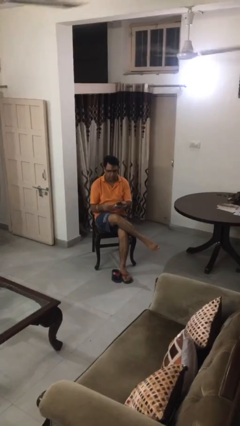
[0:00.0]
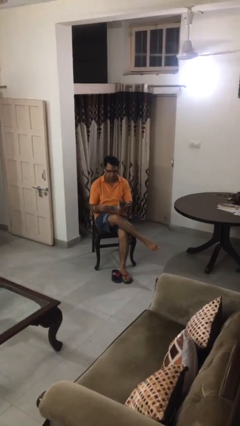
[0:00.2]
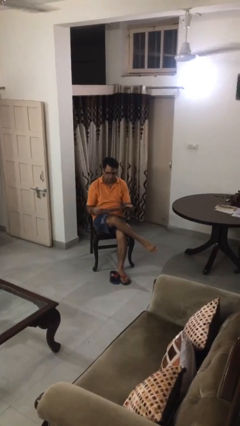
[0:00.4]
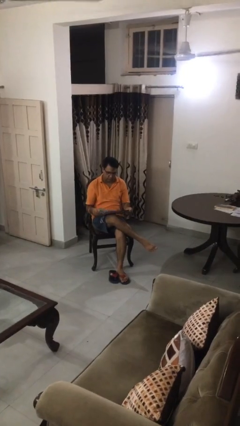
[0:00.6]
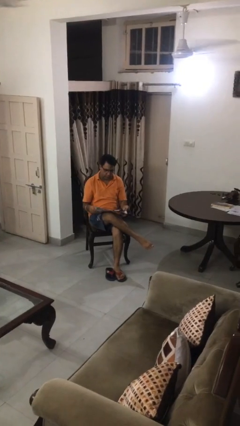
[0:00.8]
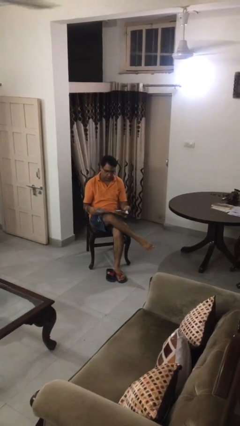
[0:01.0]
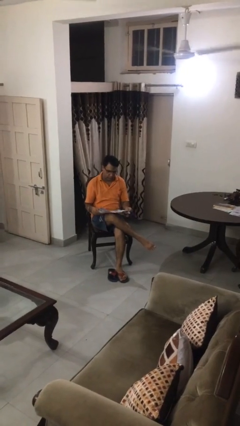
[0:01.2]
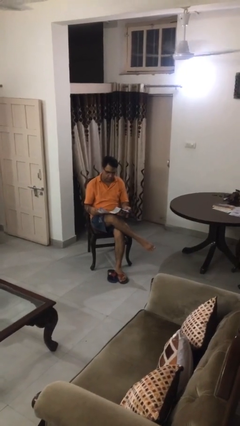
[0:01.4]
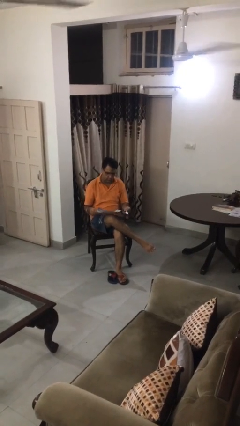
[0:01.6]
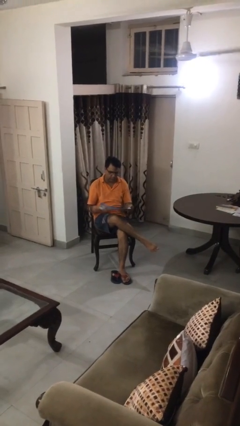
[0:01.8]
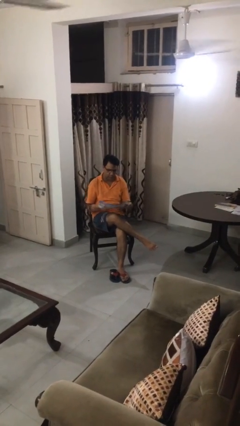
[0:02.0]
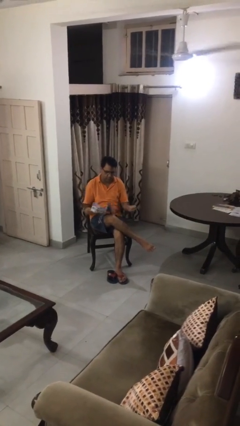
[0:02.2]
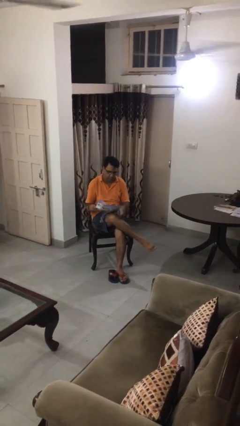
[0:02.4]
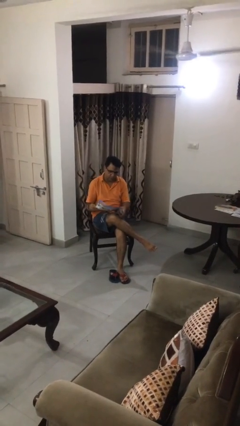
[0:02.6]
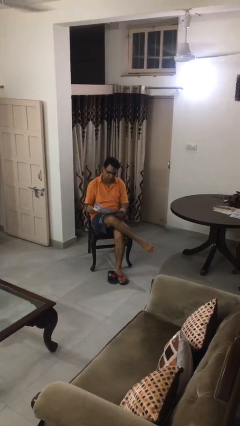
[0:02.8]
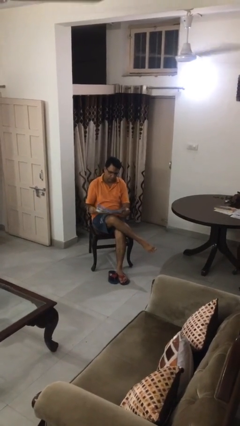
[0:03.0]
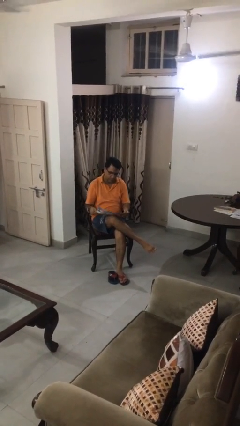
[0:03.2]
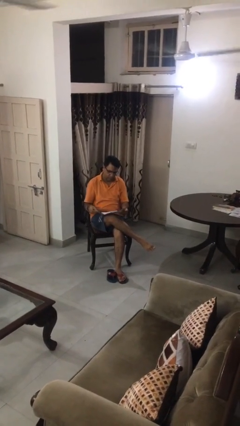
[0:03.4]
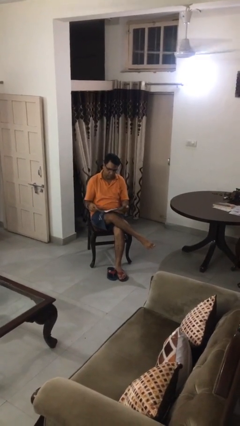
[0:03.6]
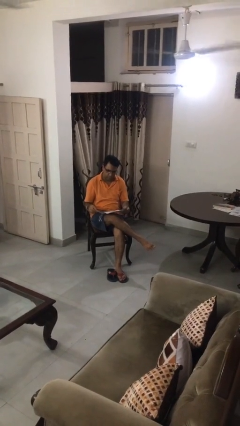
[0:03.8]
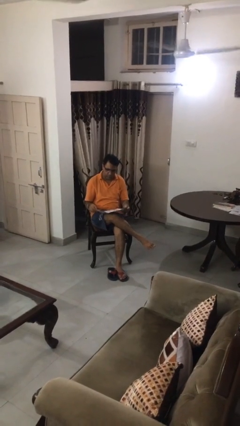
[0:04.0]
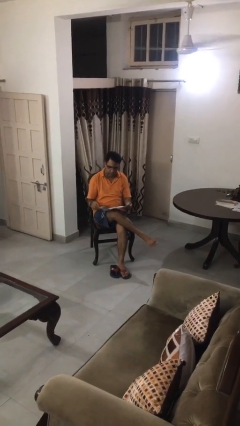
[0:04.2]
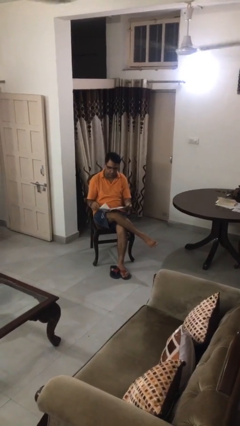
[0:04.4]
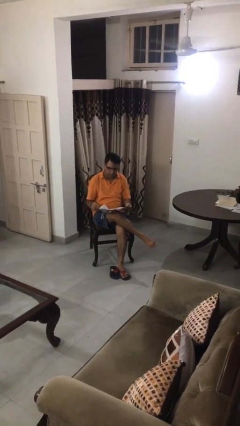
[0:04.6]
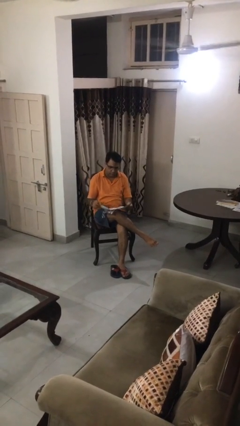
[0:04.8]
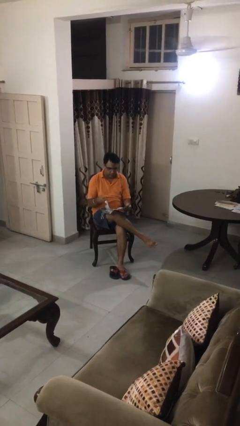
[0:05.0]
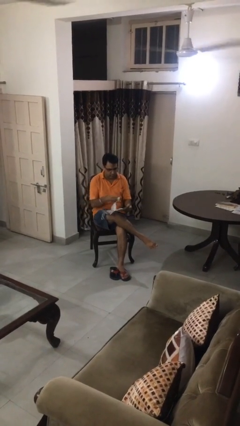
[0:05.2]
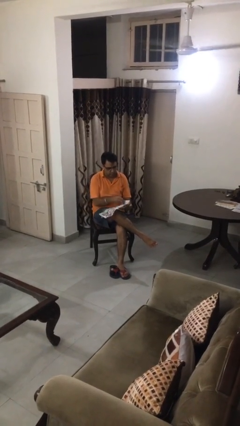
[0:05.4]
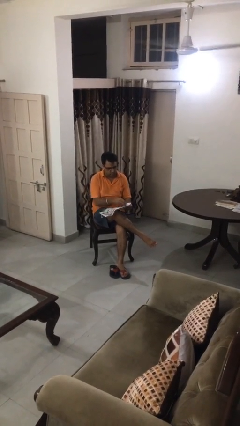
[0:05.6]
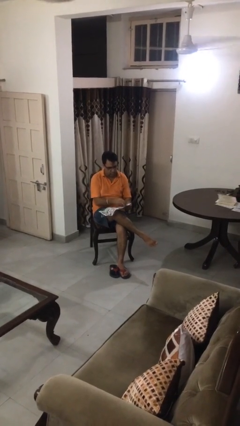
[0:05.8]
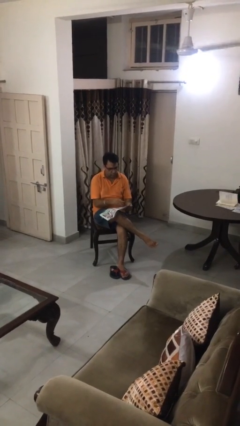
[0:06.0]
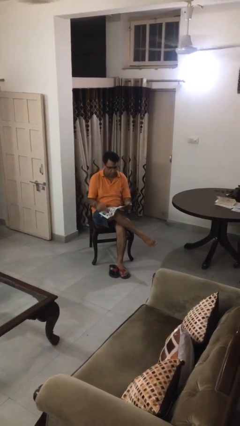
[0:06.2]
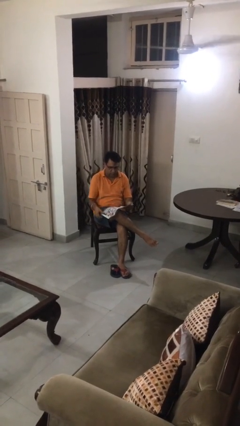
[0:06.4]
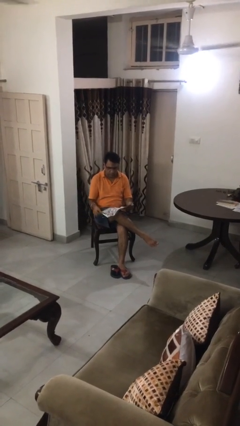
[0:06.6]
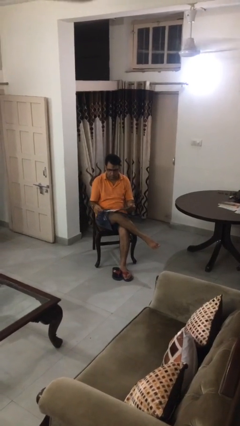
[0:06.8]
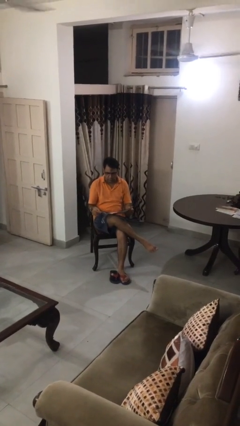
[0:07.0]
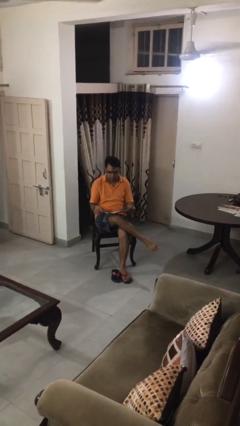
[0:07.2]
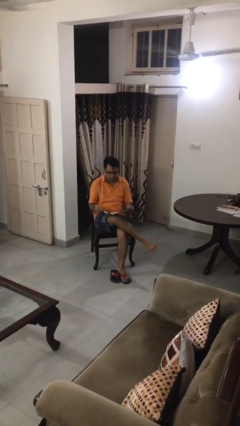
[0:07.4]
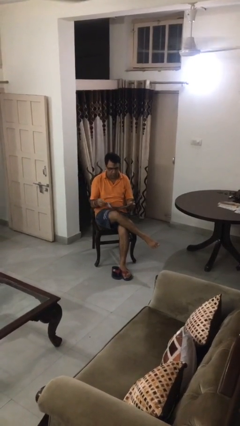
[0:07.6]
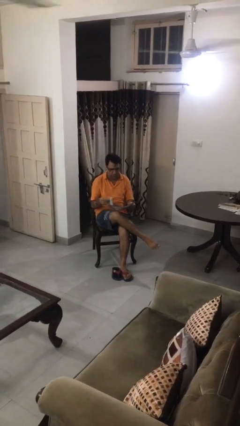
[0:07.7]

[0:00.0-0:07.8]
person reads magazine

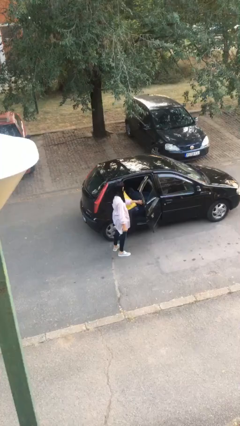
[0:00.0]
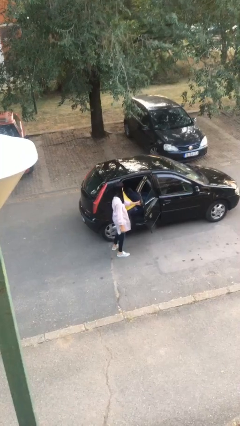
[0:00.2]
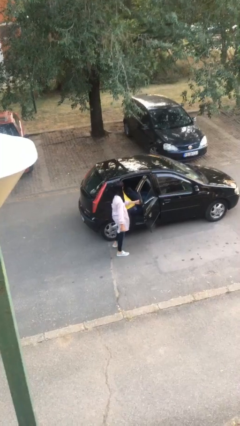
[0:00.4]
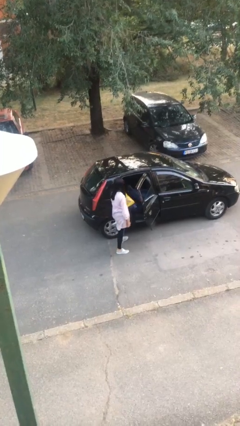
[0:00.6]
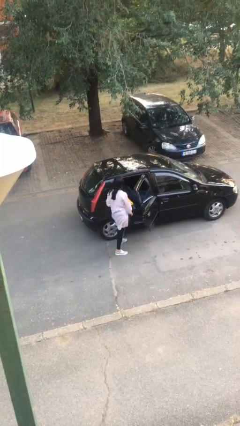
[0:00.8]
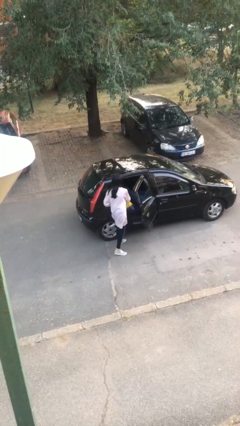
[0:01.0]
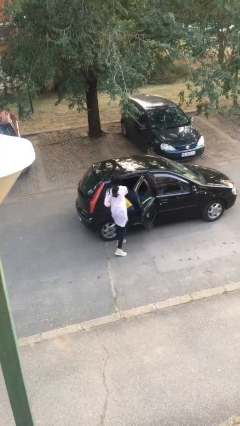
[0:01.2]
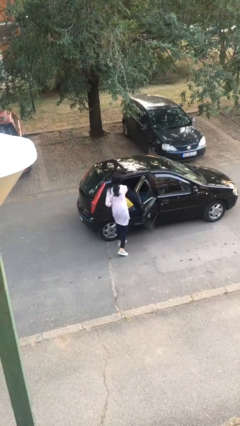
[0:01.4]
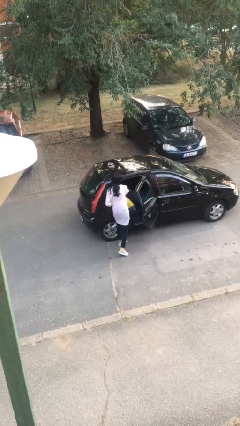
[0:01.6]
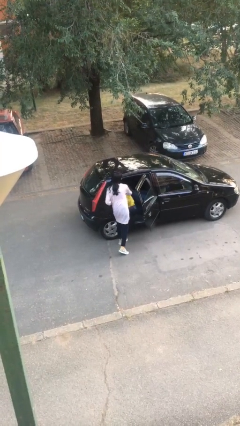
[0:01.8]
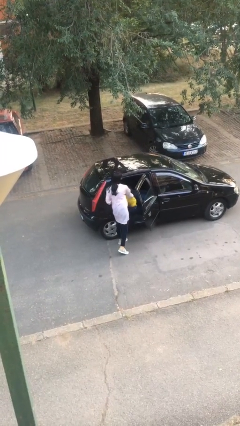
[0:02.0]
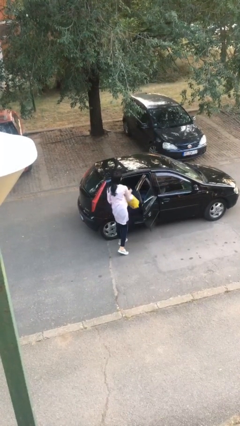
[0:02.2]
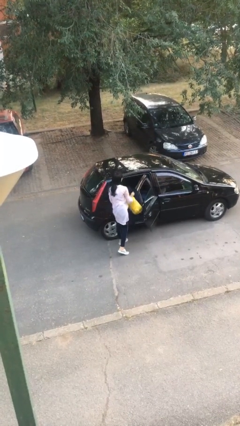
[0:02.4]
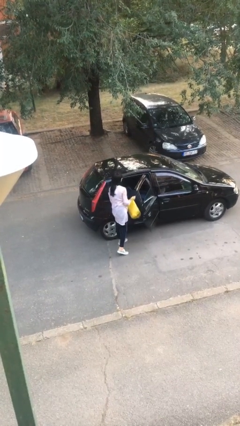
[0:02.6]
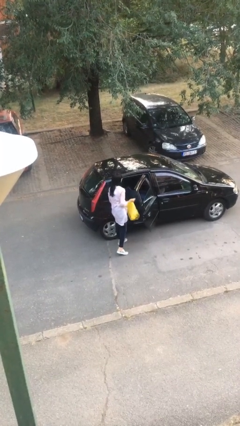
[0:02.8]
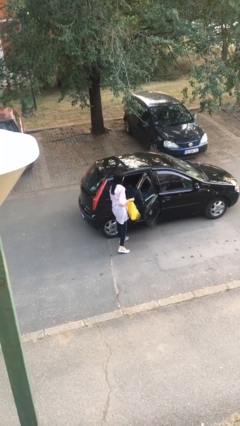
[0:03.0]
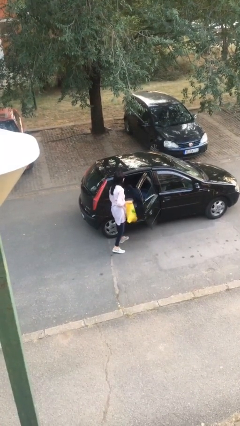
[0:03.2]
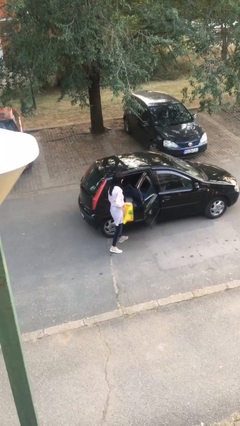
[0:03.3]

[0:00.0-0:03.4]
person unloads car

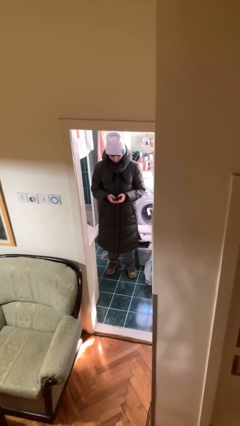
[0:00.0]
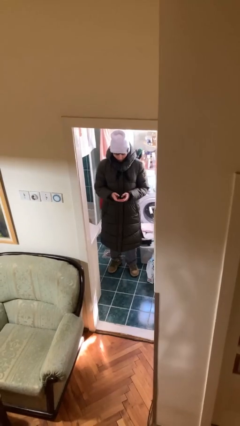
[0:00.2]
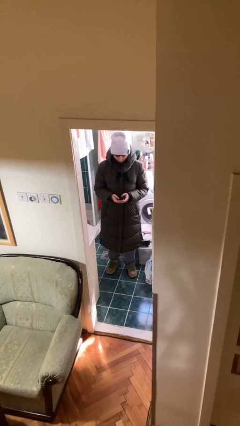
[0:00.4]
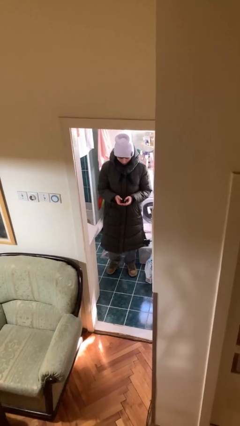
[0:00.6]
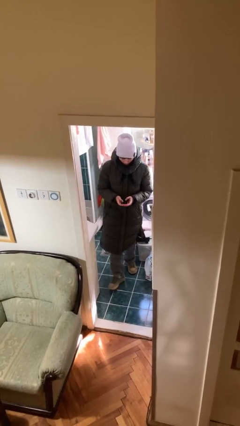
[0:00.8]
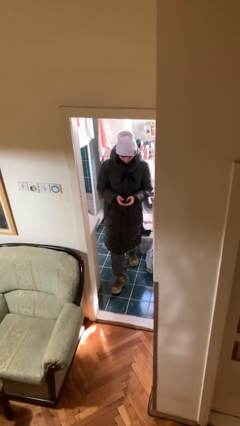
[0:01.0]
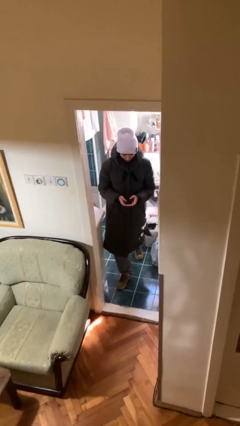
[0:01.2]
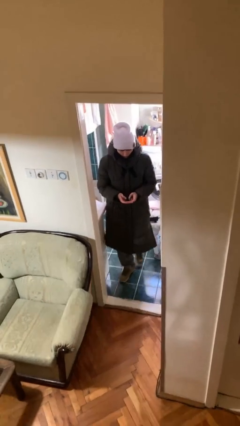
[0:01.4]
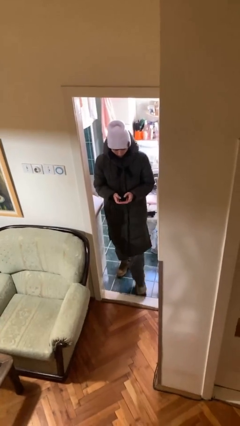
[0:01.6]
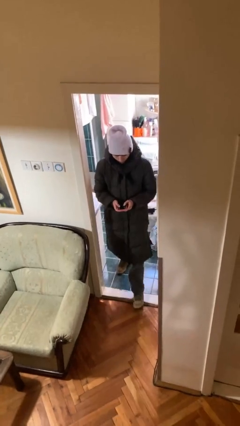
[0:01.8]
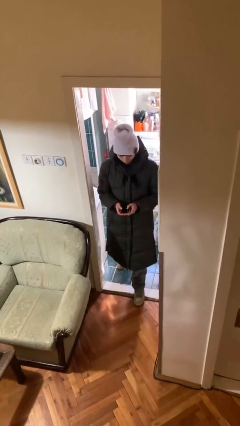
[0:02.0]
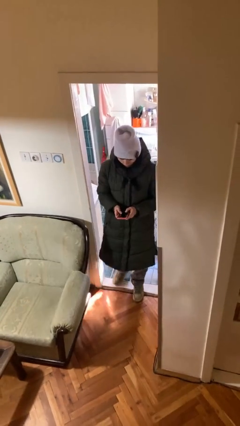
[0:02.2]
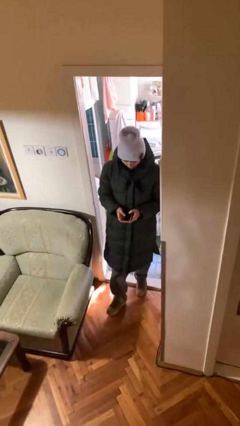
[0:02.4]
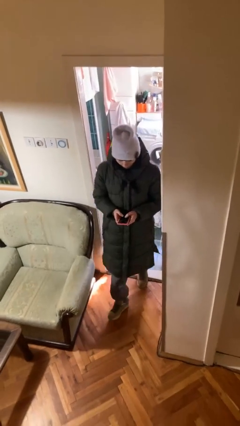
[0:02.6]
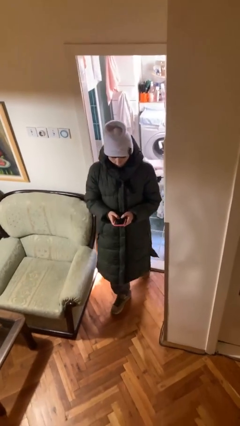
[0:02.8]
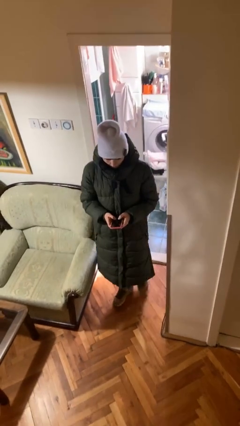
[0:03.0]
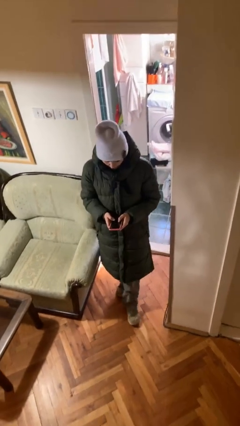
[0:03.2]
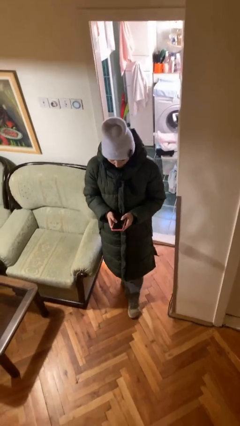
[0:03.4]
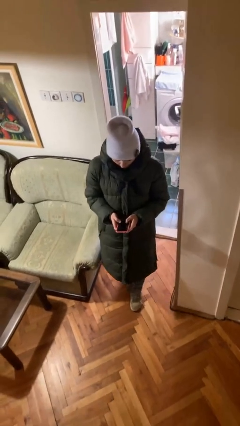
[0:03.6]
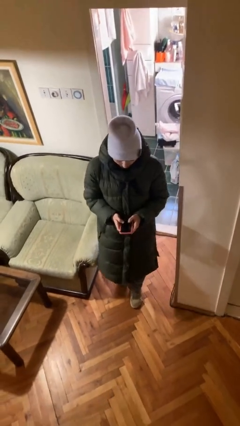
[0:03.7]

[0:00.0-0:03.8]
person enters scene through structure

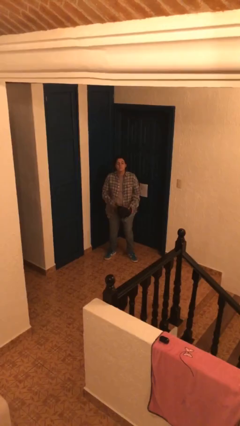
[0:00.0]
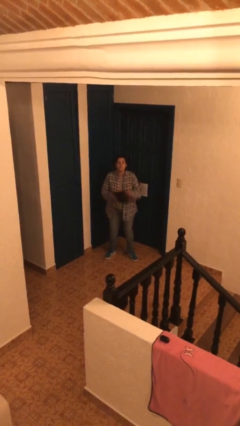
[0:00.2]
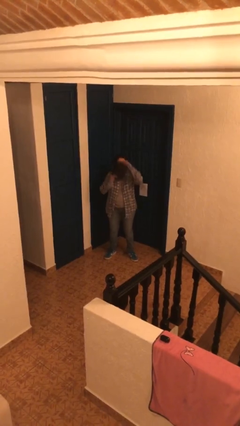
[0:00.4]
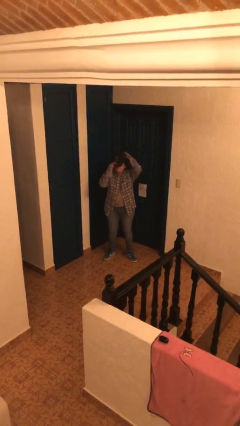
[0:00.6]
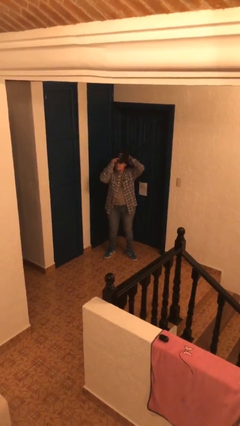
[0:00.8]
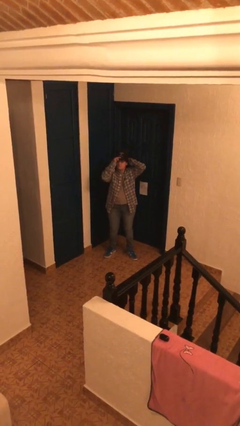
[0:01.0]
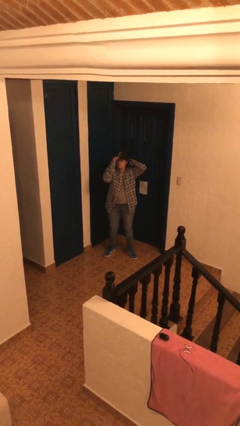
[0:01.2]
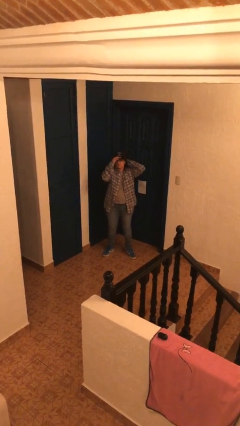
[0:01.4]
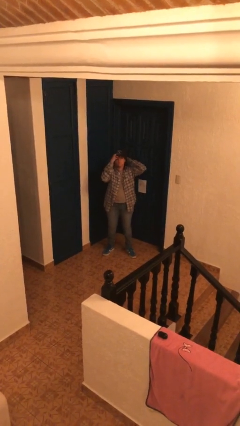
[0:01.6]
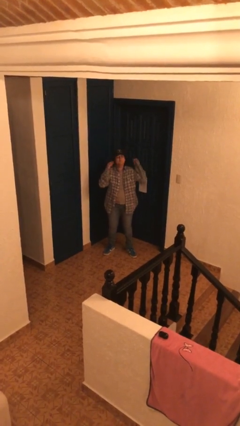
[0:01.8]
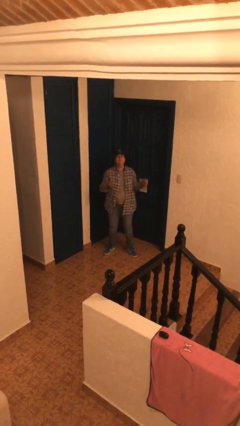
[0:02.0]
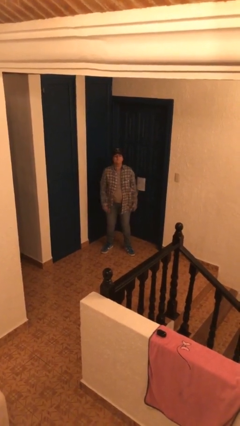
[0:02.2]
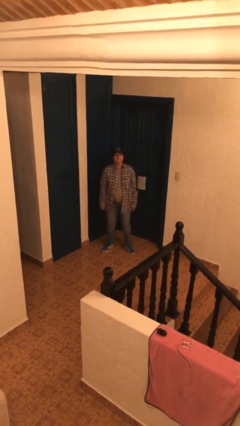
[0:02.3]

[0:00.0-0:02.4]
person puts on hat

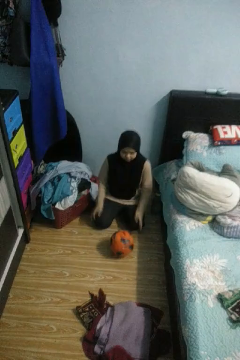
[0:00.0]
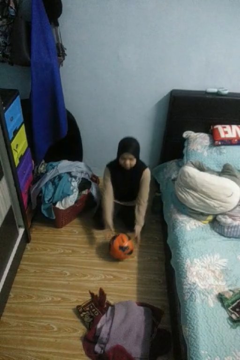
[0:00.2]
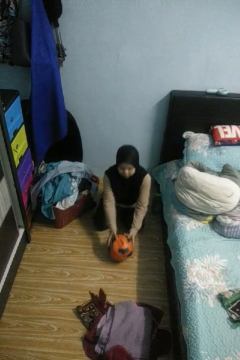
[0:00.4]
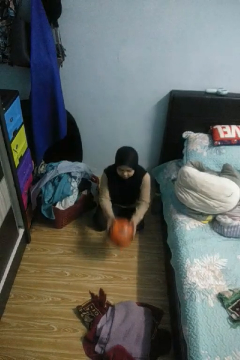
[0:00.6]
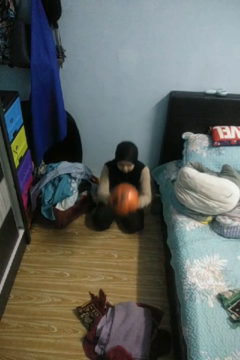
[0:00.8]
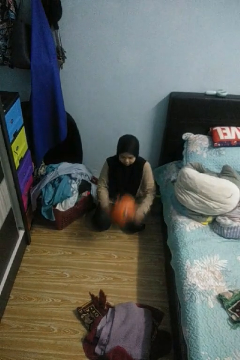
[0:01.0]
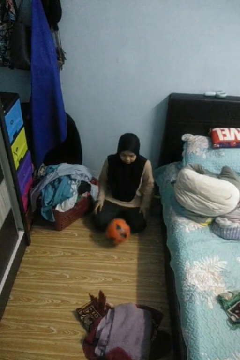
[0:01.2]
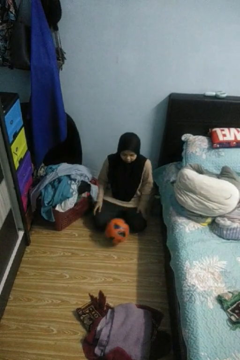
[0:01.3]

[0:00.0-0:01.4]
person bounces ball on floor
